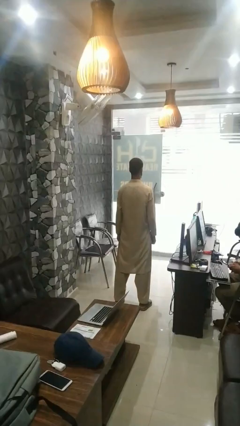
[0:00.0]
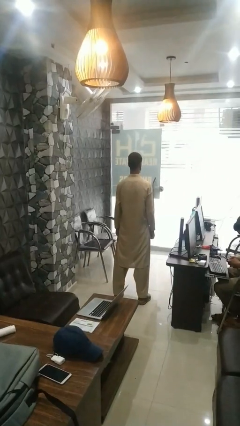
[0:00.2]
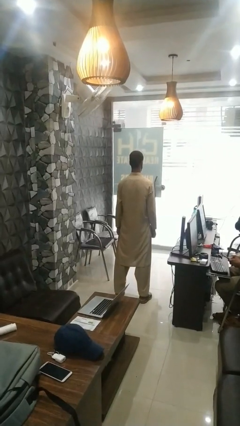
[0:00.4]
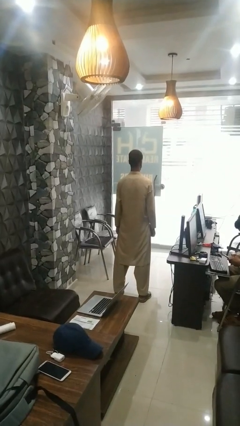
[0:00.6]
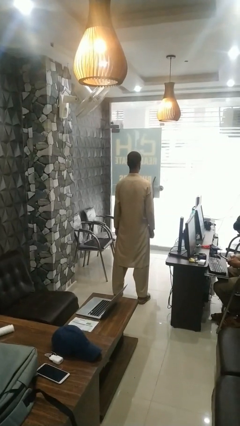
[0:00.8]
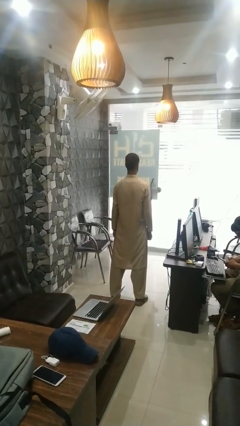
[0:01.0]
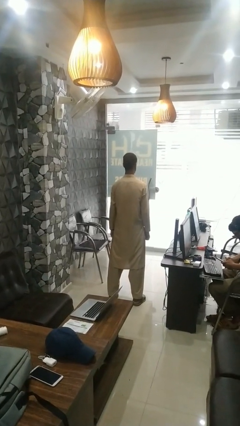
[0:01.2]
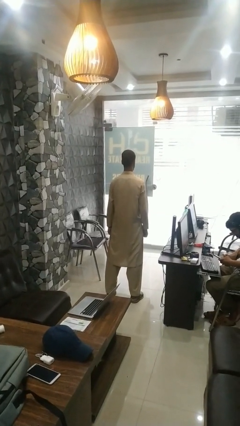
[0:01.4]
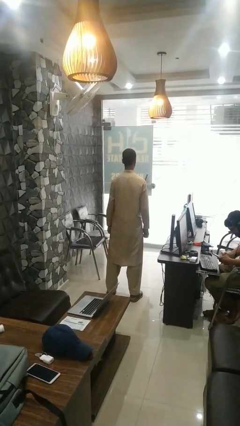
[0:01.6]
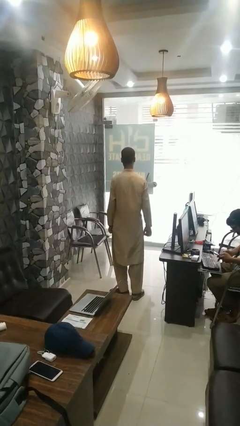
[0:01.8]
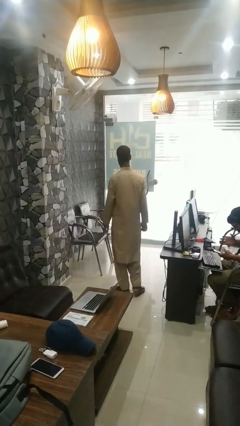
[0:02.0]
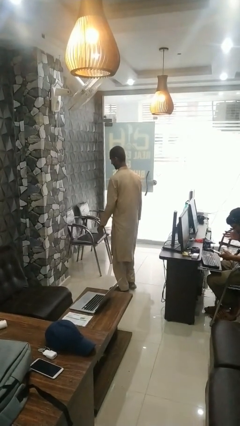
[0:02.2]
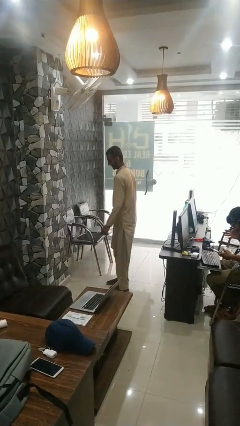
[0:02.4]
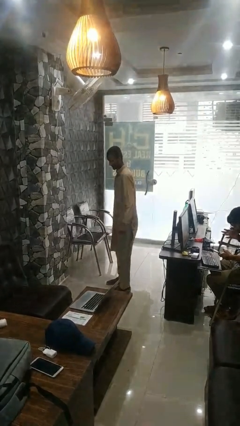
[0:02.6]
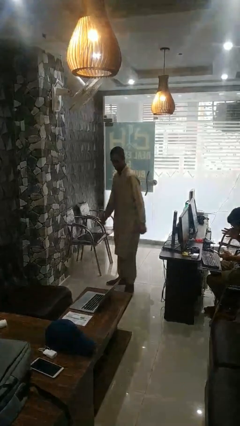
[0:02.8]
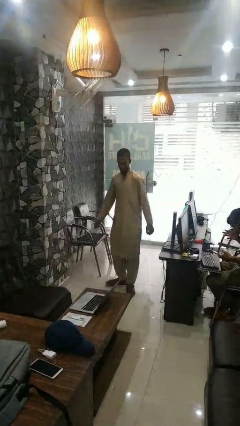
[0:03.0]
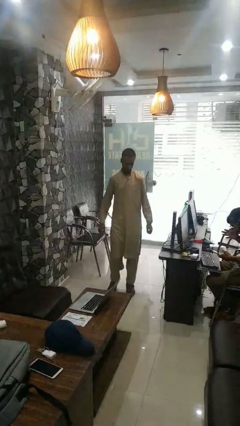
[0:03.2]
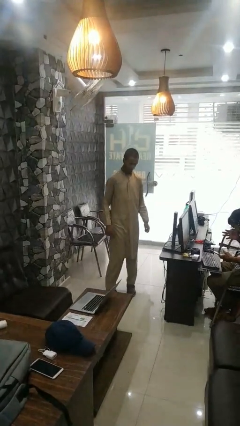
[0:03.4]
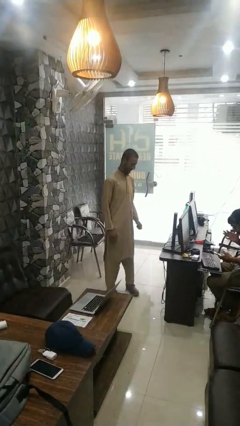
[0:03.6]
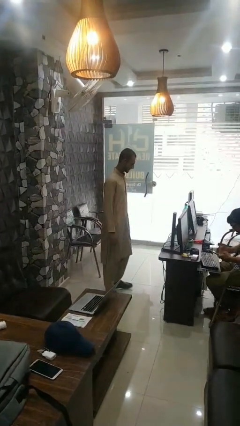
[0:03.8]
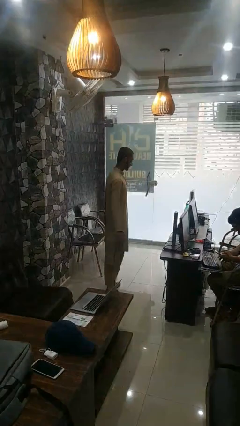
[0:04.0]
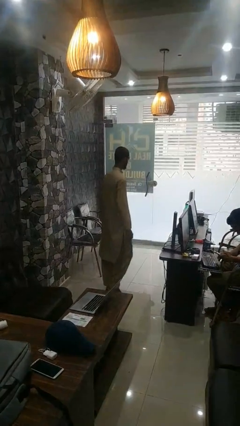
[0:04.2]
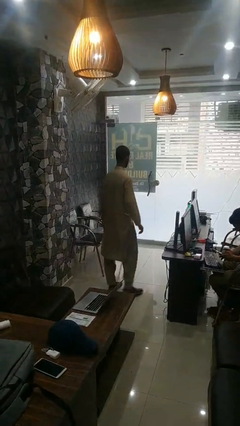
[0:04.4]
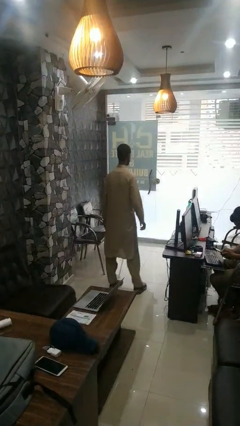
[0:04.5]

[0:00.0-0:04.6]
person twirls

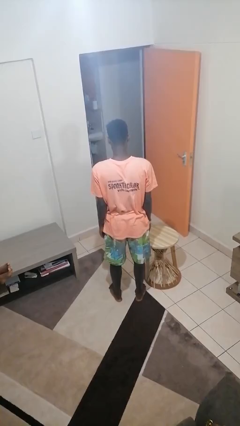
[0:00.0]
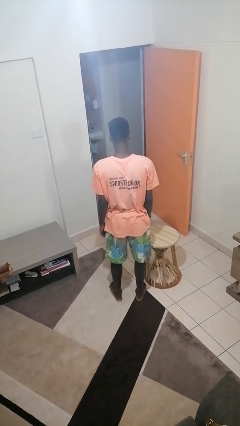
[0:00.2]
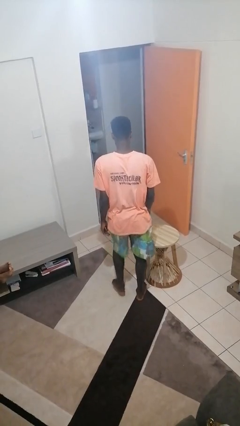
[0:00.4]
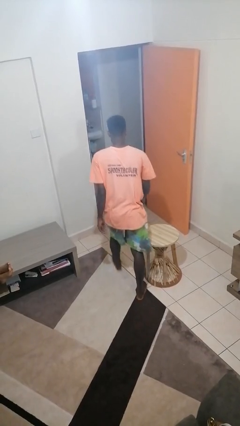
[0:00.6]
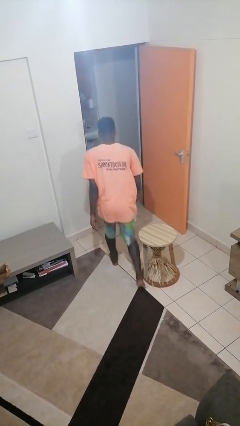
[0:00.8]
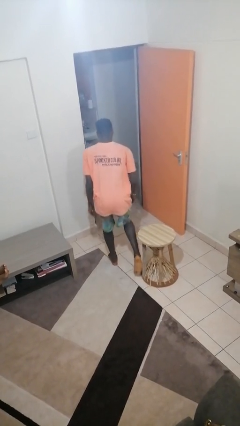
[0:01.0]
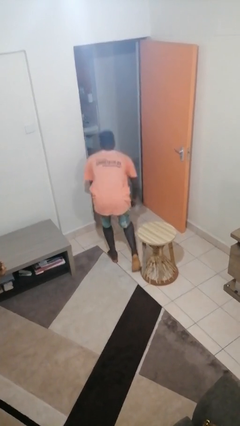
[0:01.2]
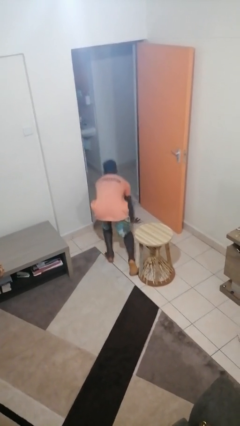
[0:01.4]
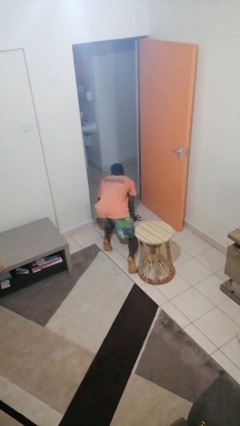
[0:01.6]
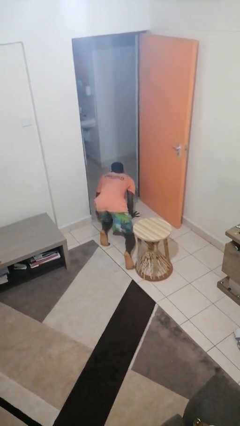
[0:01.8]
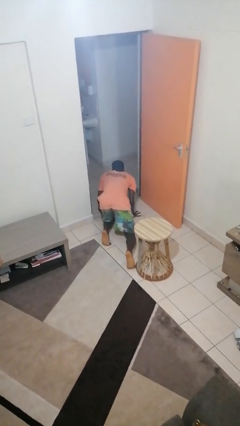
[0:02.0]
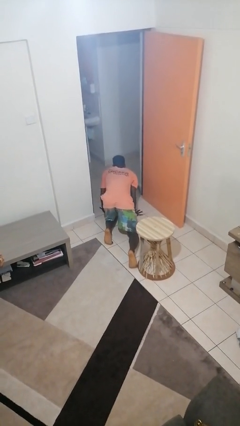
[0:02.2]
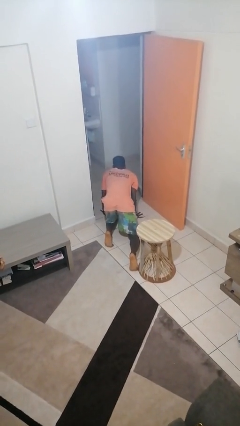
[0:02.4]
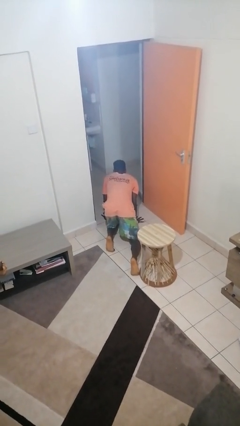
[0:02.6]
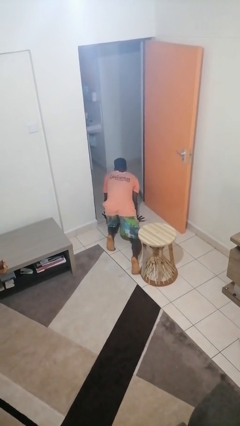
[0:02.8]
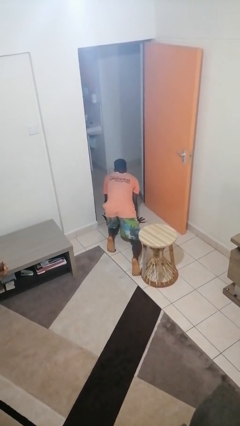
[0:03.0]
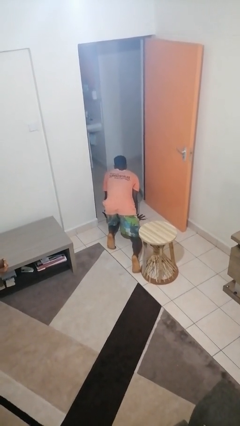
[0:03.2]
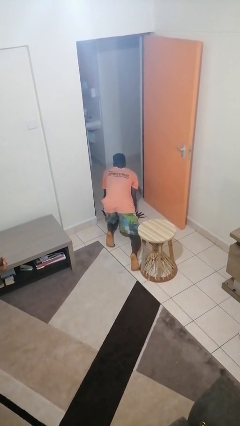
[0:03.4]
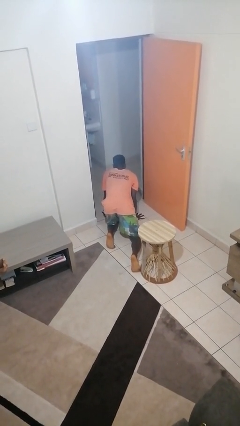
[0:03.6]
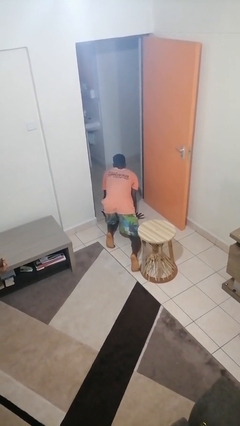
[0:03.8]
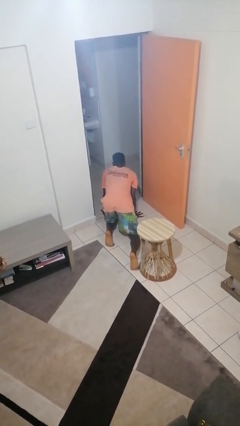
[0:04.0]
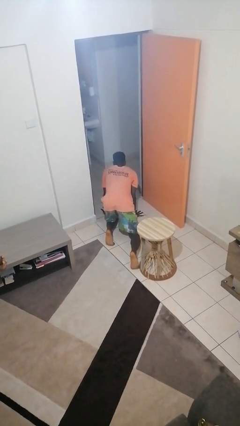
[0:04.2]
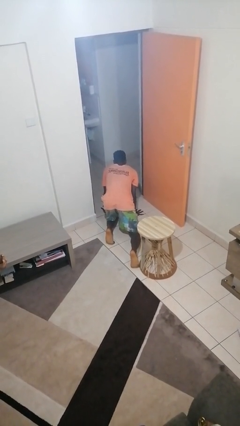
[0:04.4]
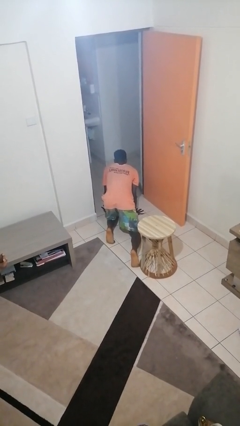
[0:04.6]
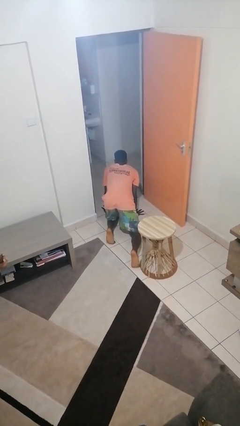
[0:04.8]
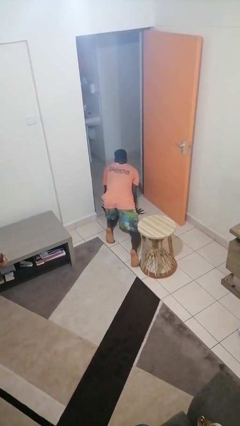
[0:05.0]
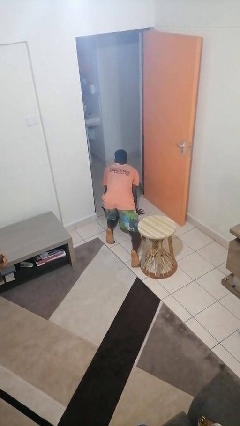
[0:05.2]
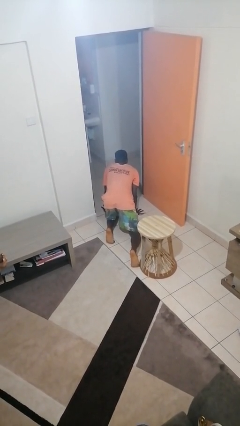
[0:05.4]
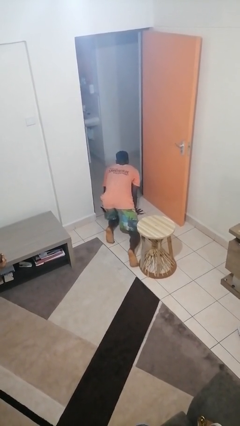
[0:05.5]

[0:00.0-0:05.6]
person trips on object on floor

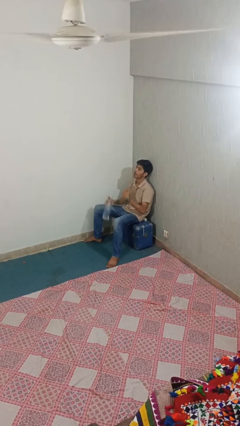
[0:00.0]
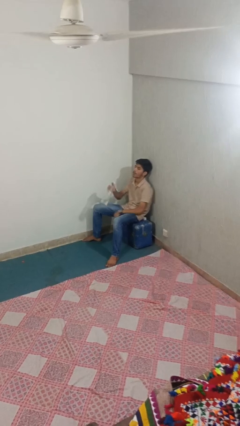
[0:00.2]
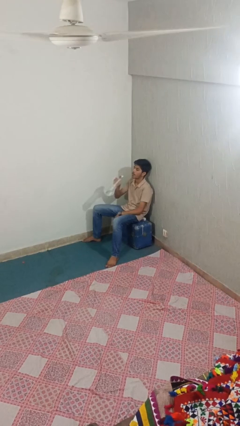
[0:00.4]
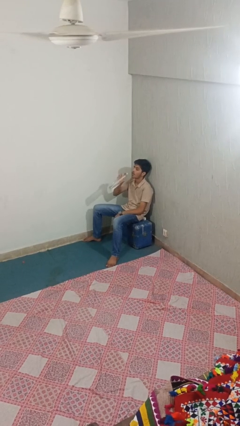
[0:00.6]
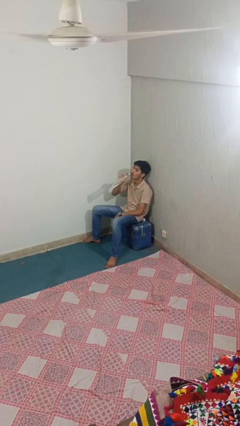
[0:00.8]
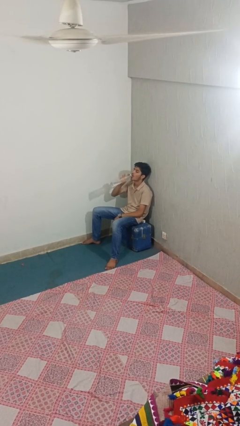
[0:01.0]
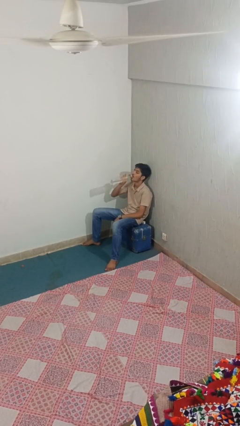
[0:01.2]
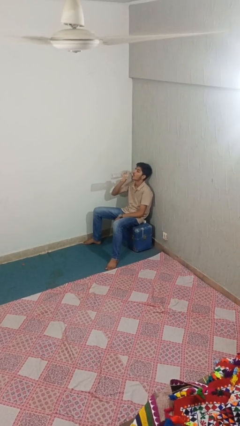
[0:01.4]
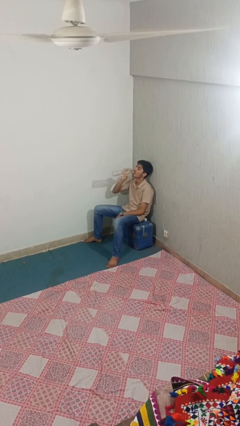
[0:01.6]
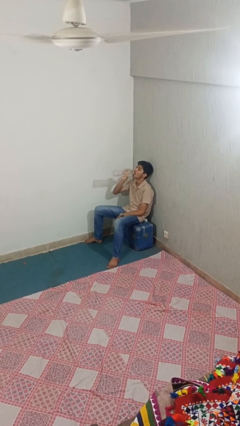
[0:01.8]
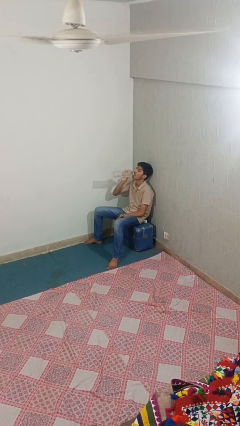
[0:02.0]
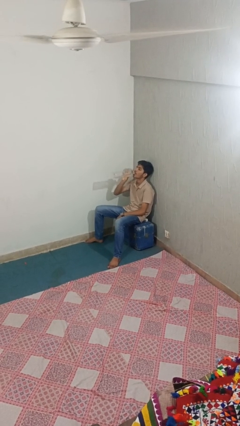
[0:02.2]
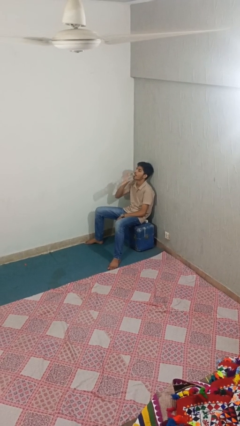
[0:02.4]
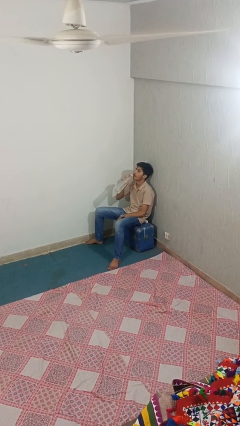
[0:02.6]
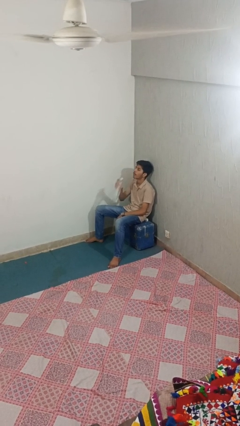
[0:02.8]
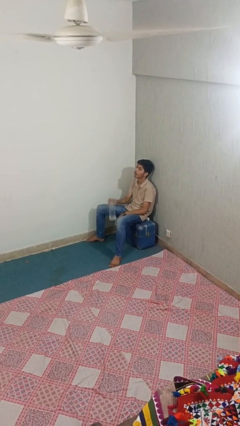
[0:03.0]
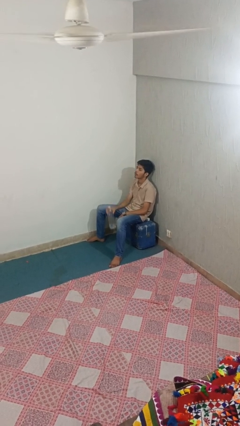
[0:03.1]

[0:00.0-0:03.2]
person drinks from bottle

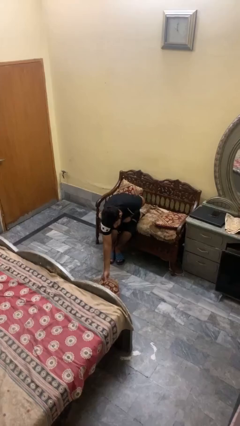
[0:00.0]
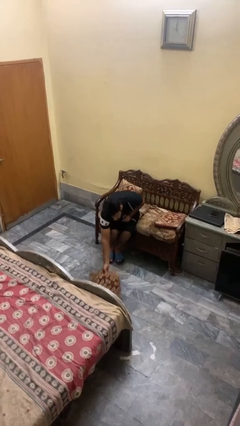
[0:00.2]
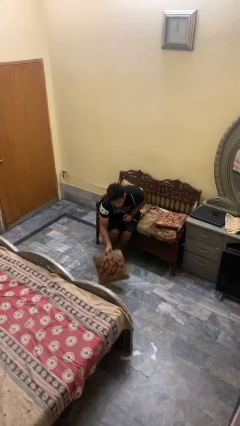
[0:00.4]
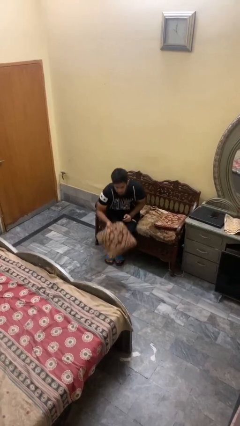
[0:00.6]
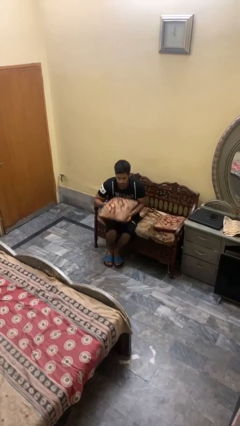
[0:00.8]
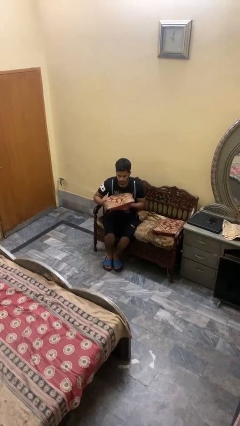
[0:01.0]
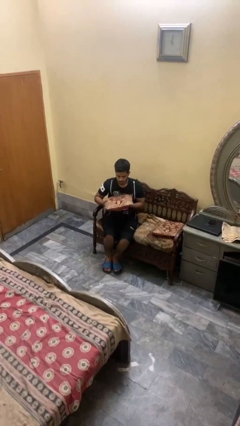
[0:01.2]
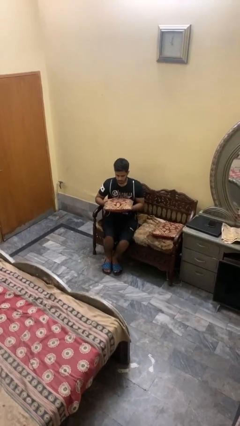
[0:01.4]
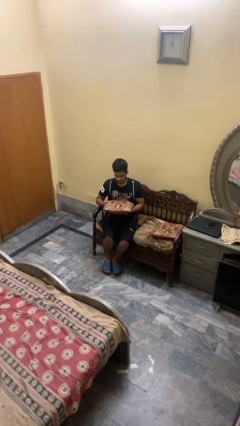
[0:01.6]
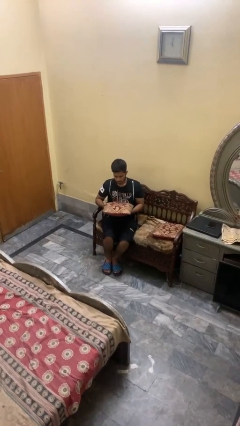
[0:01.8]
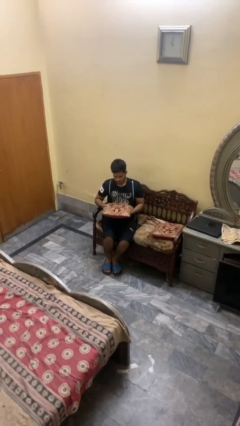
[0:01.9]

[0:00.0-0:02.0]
person picks up object from floor

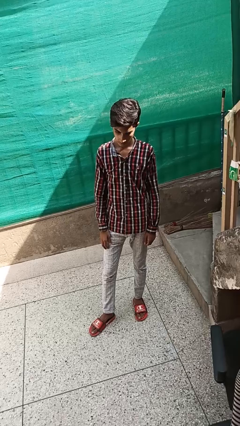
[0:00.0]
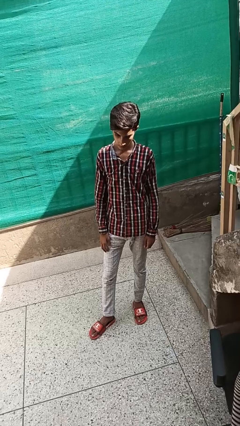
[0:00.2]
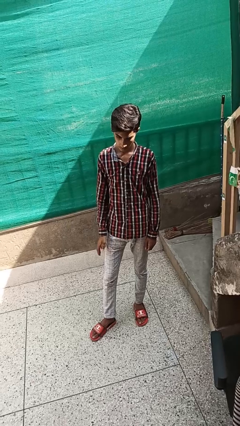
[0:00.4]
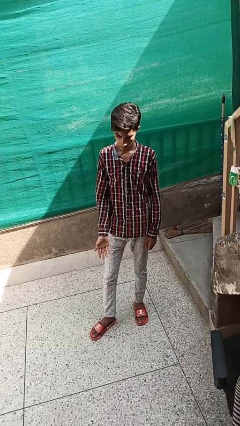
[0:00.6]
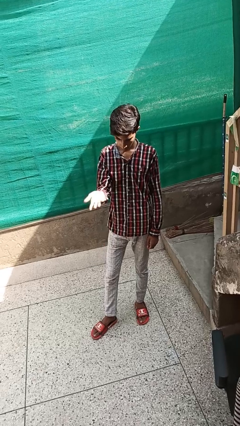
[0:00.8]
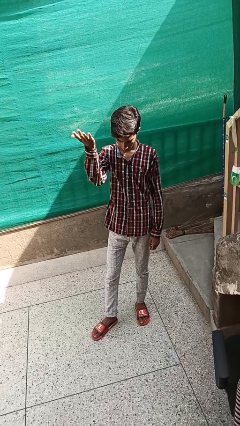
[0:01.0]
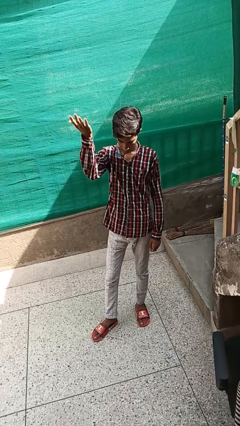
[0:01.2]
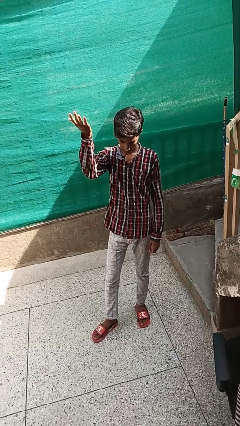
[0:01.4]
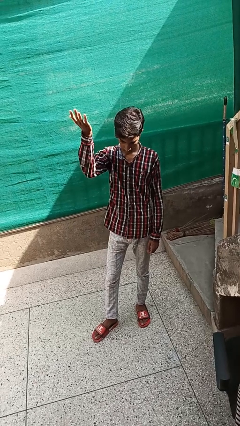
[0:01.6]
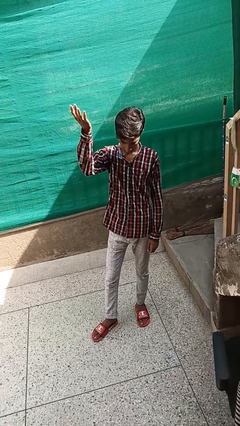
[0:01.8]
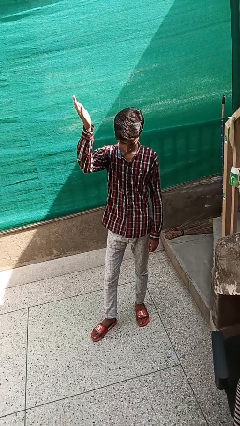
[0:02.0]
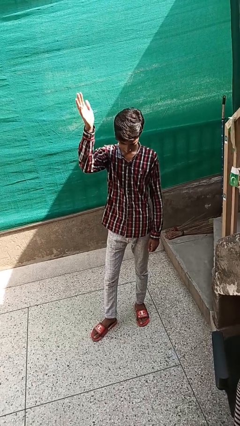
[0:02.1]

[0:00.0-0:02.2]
person gestures swipe up
